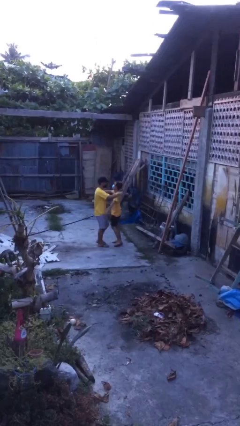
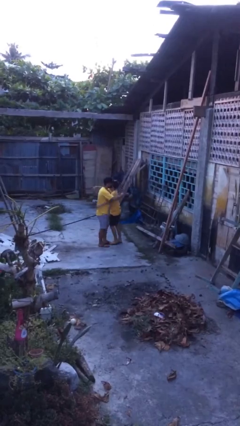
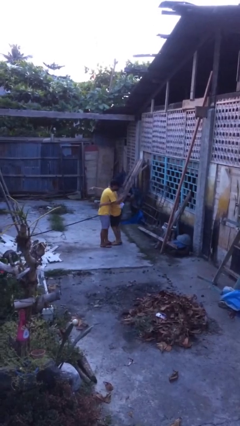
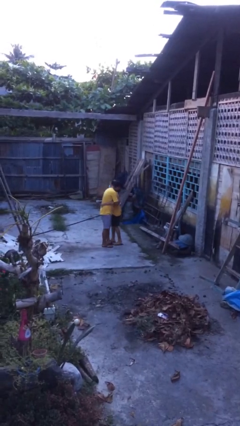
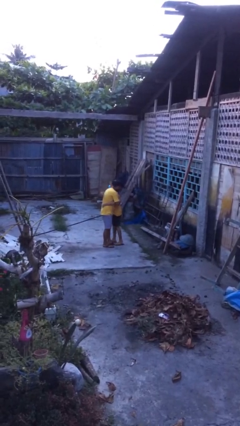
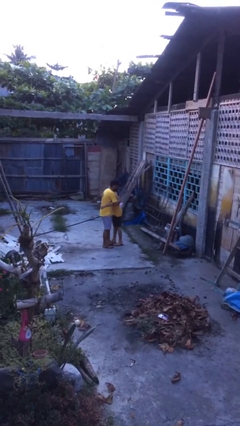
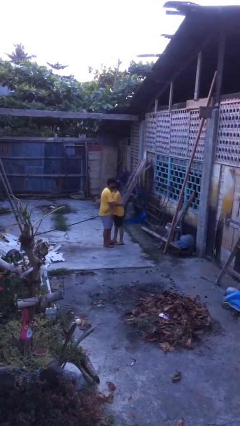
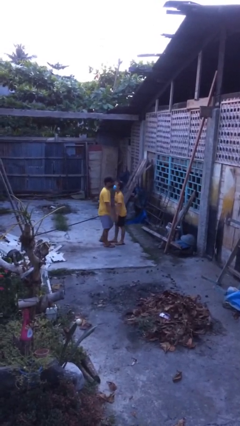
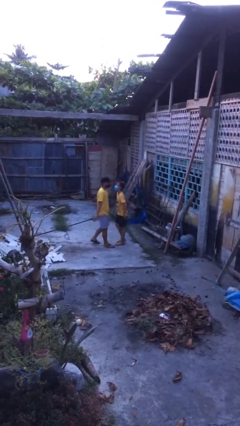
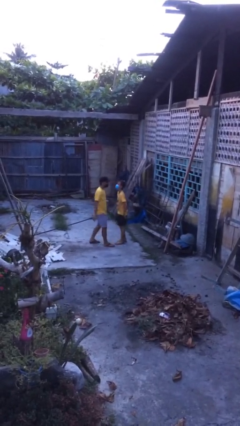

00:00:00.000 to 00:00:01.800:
person embraces person

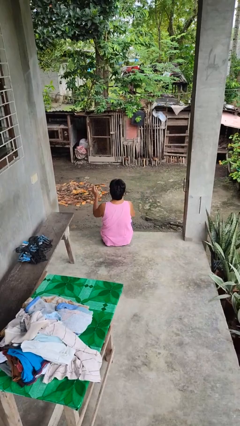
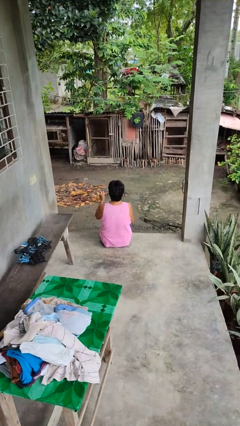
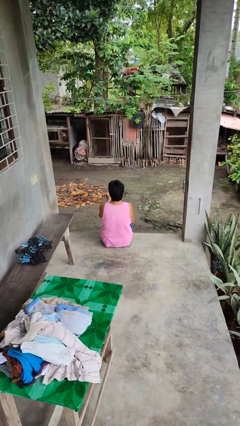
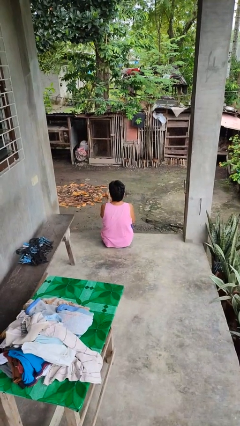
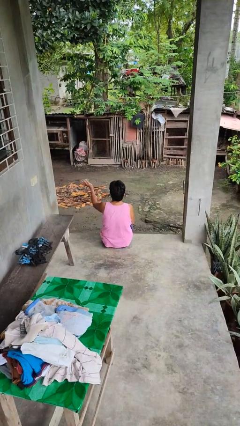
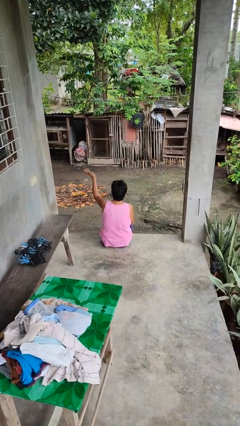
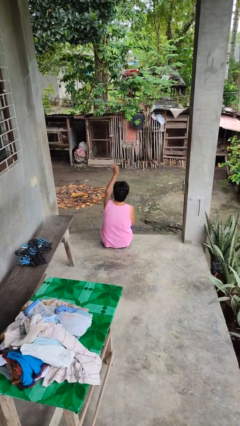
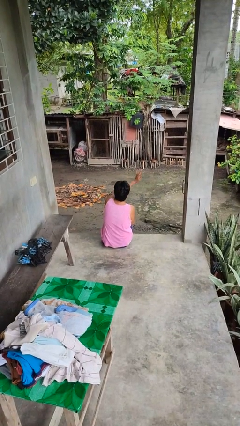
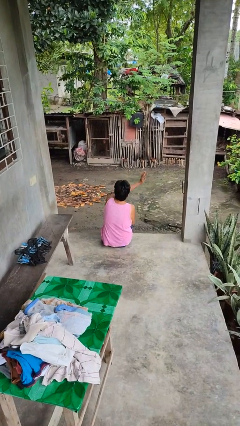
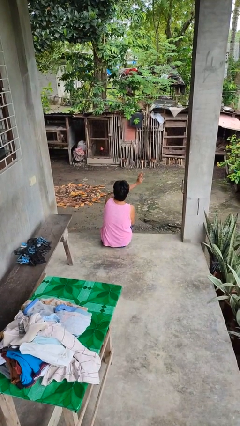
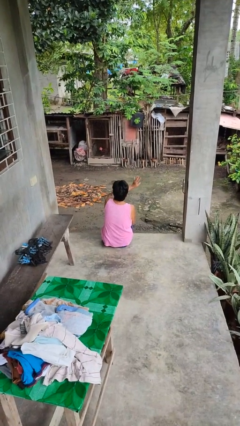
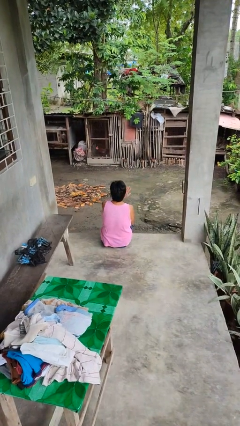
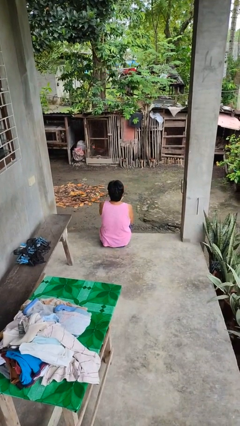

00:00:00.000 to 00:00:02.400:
person gestures swipe right

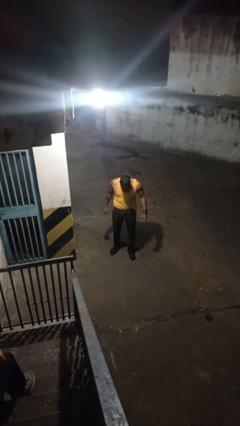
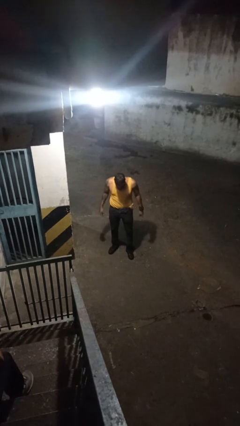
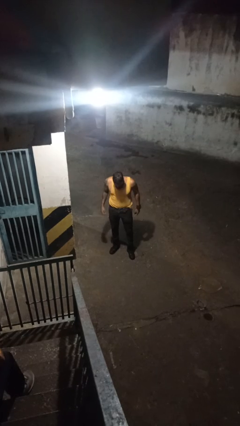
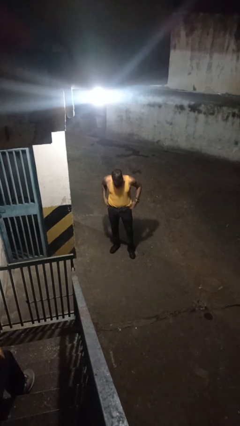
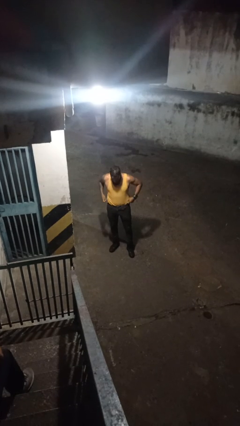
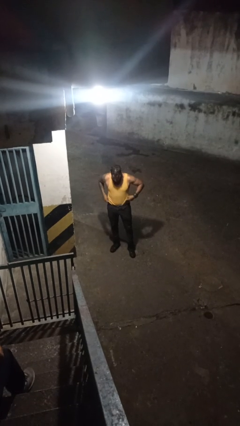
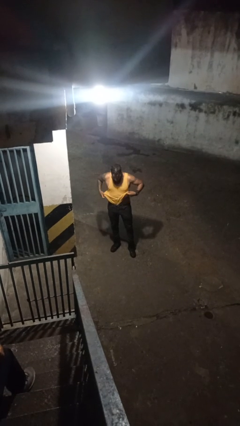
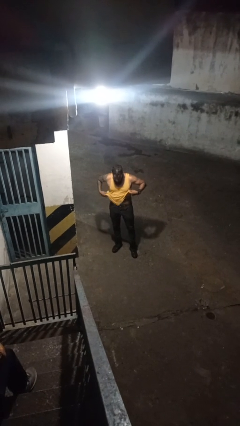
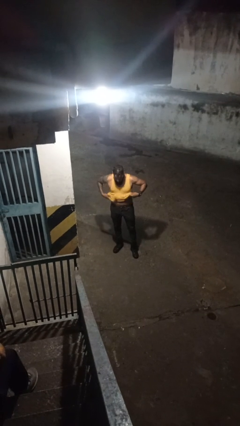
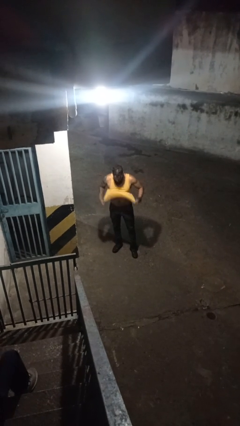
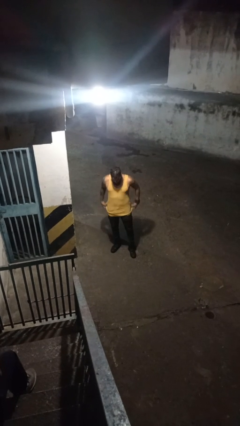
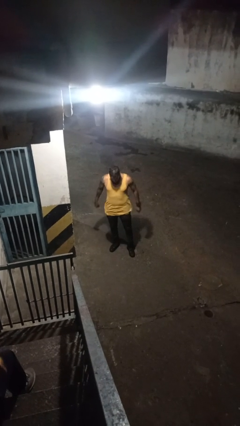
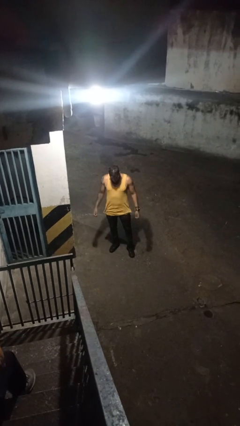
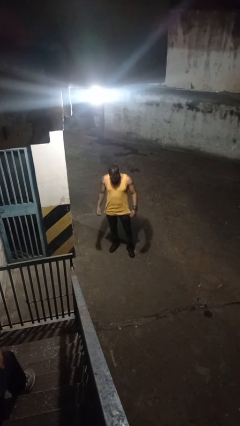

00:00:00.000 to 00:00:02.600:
person untucks shirt

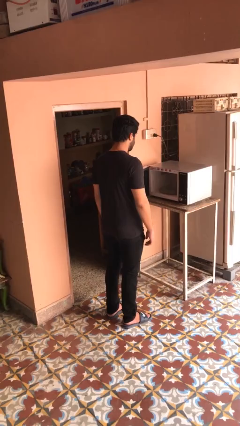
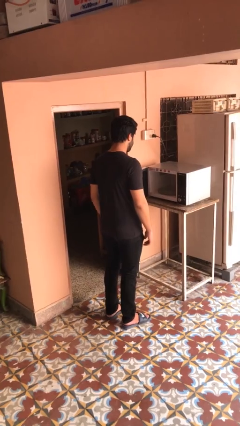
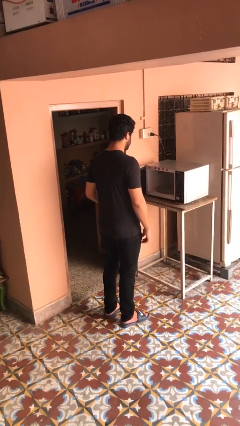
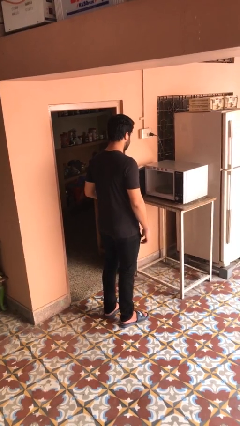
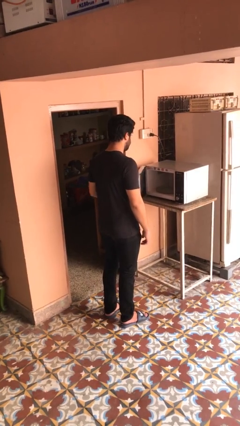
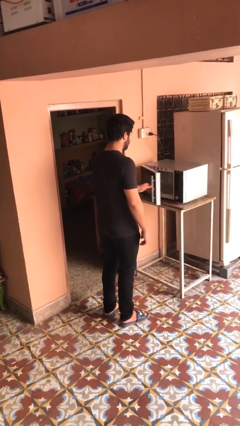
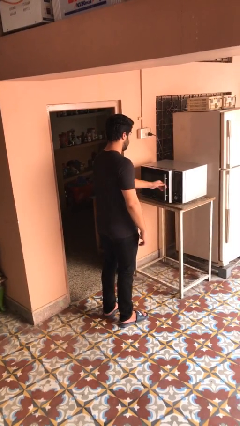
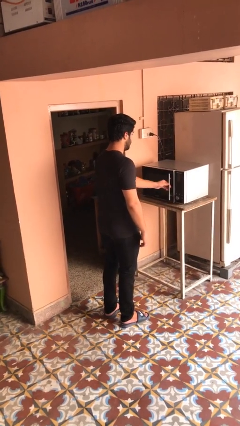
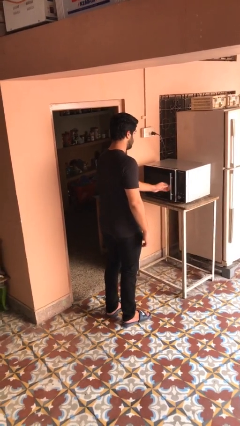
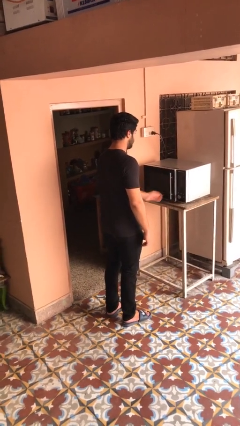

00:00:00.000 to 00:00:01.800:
person closes microwave

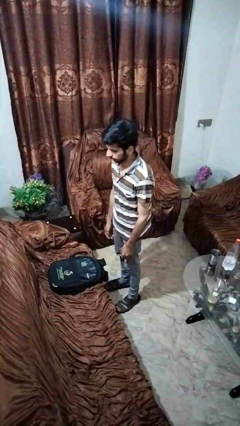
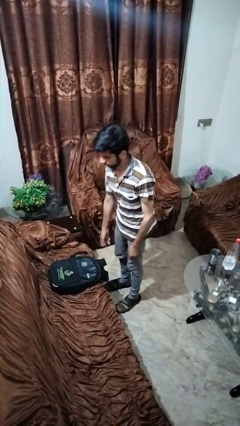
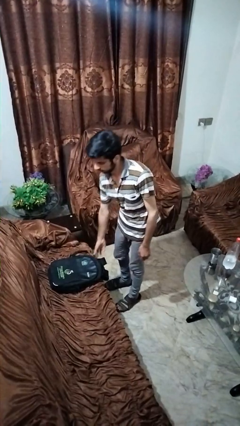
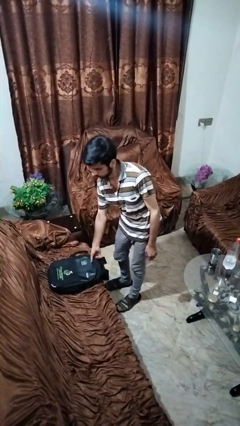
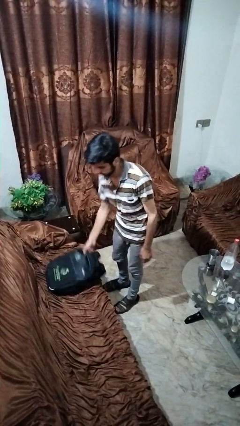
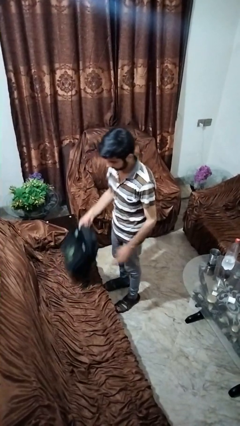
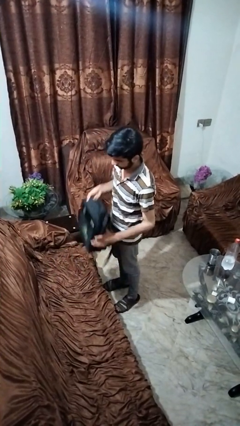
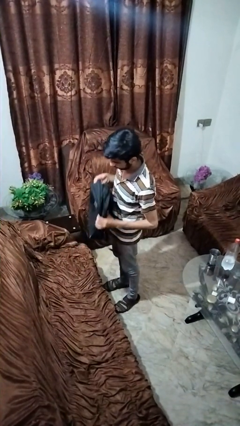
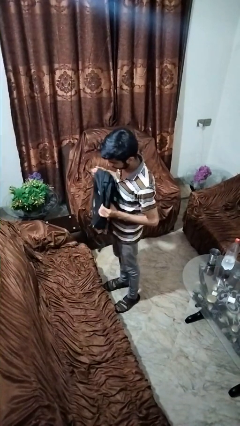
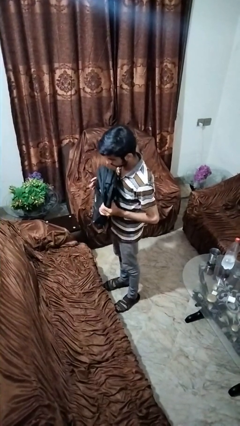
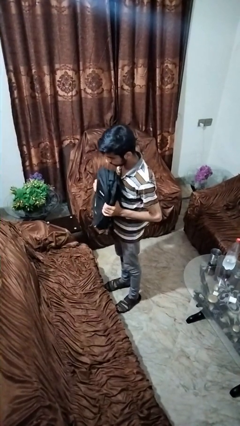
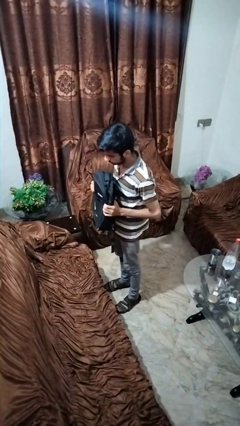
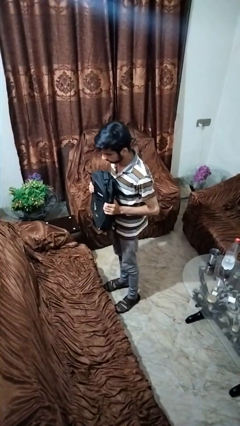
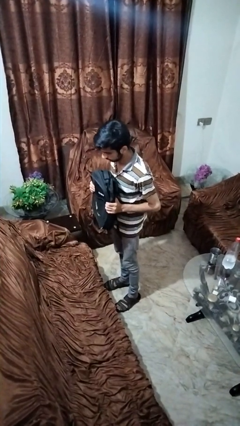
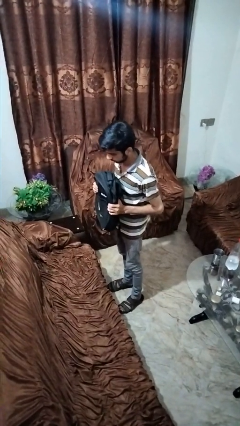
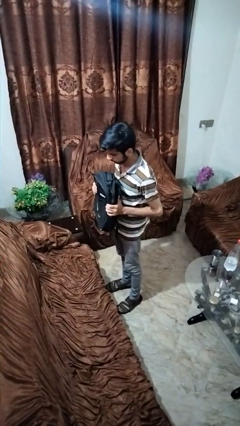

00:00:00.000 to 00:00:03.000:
person picks up object from couch

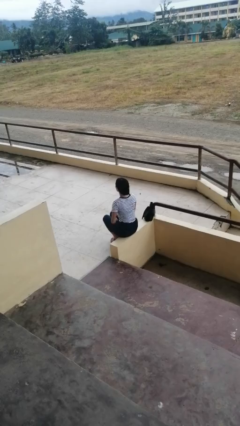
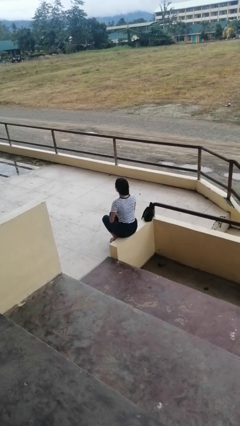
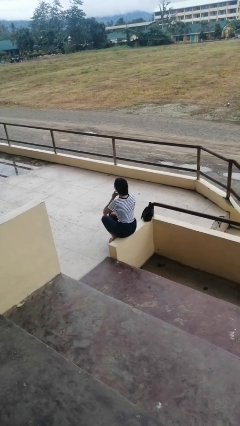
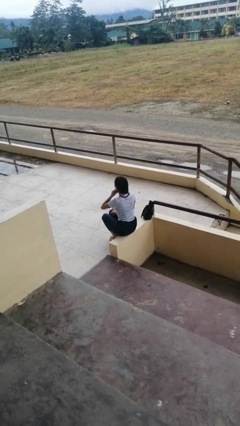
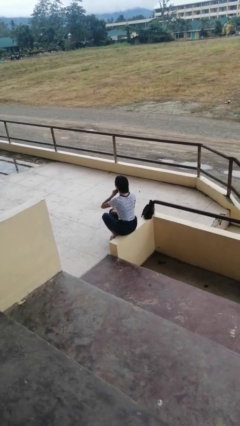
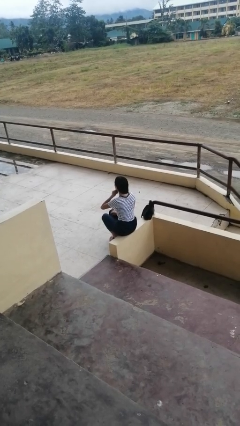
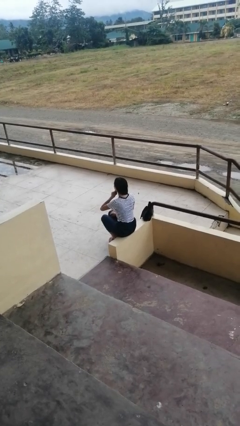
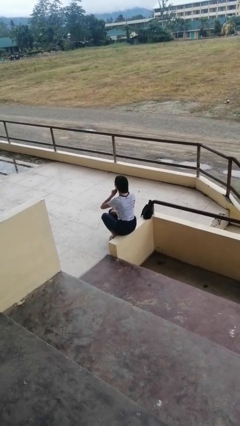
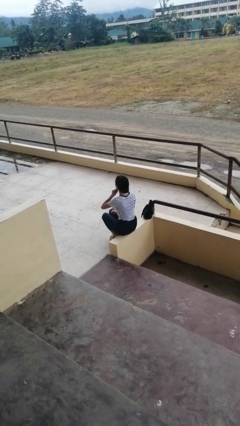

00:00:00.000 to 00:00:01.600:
person strokes chin

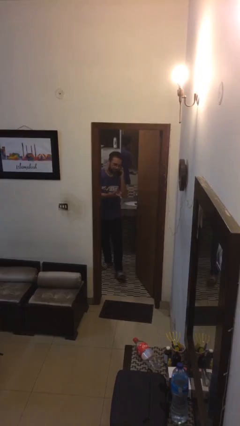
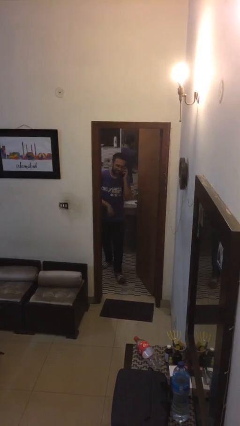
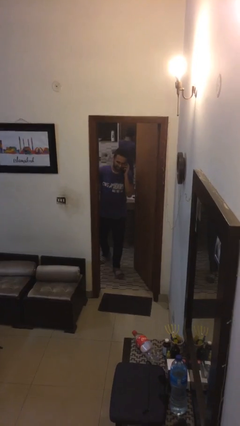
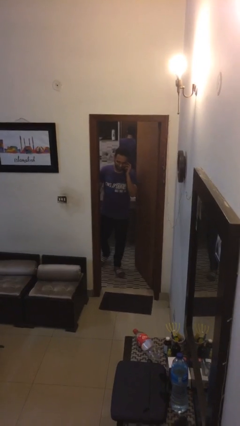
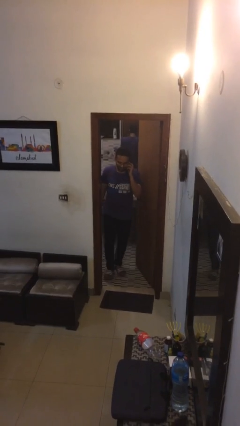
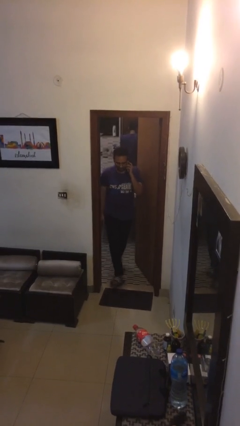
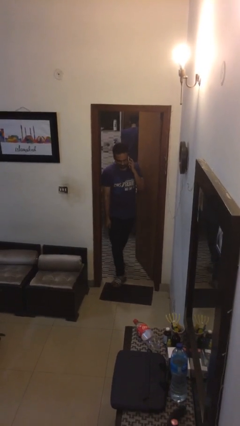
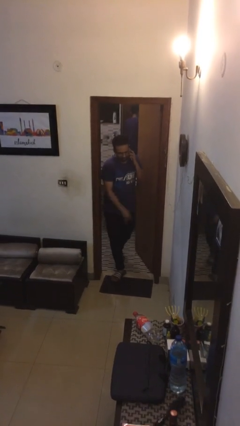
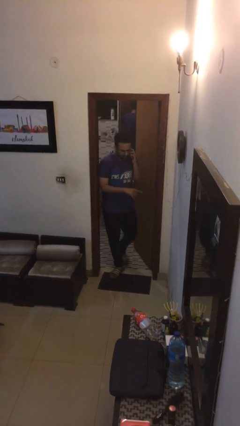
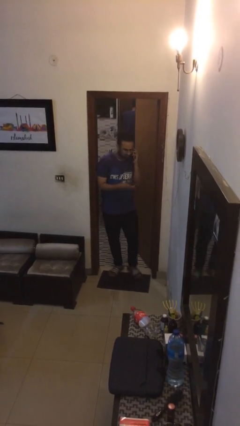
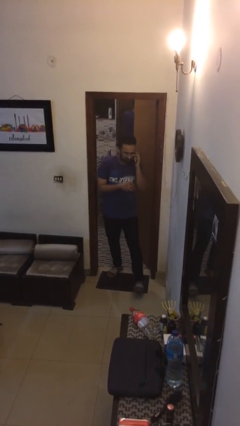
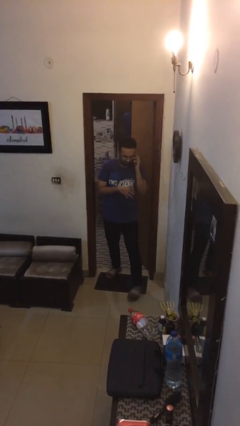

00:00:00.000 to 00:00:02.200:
person enters scene through structure

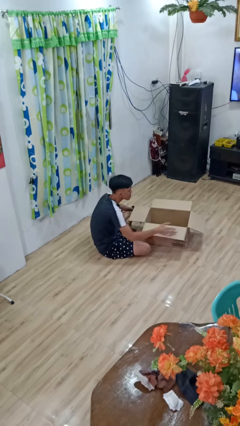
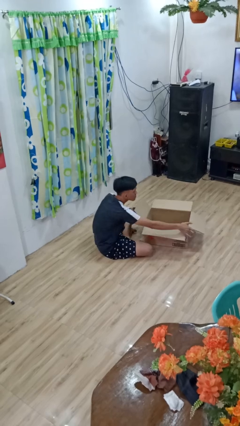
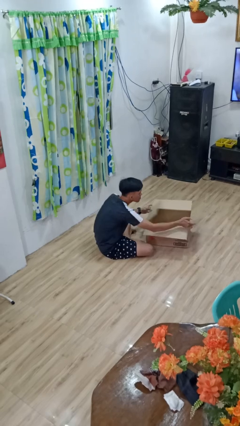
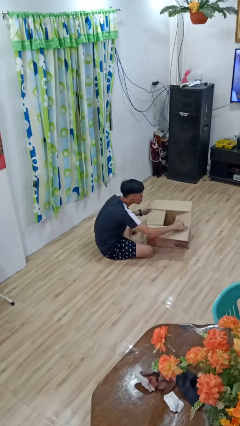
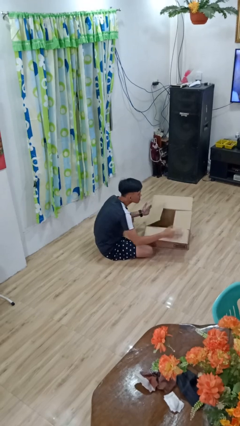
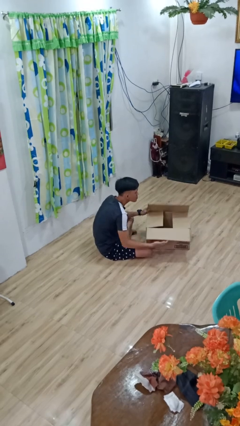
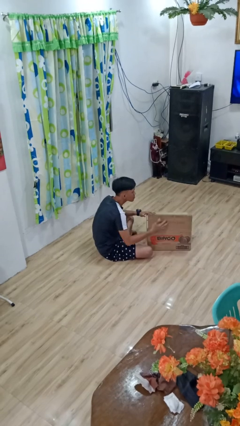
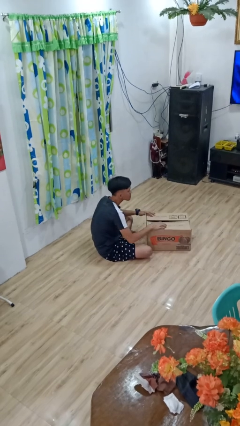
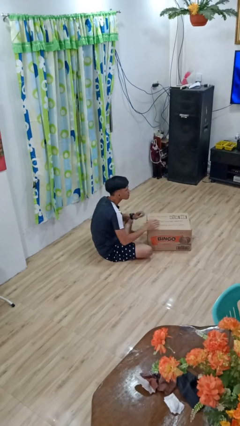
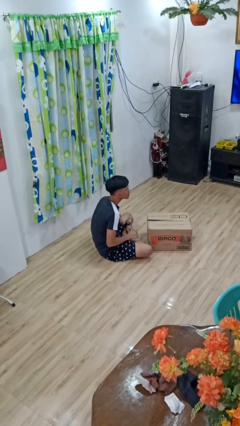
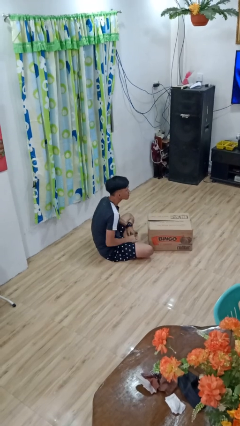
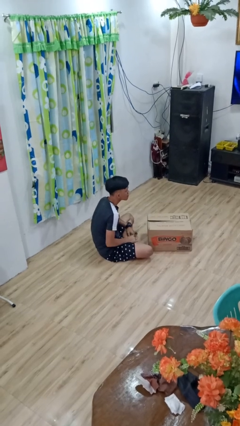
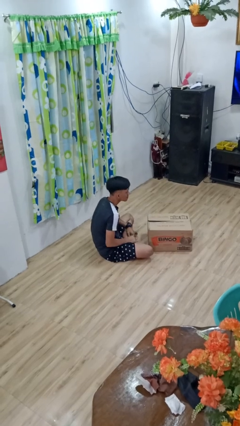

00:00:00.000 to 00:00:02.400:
person closes box
